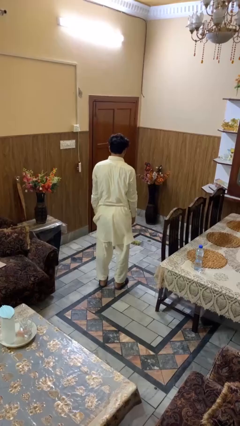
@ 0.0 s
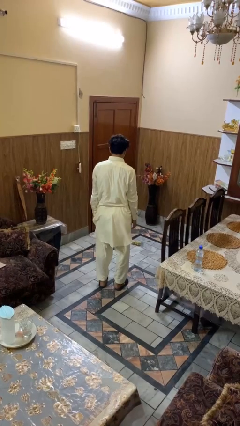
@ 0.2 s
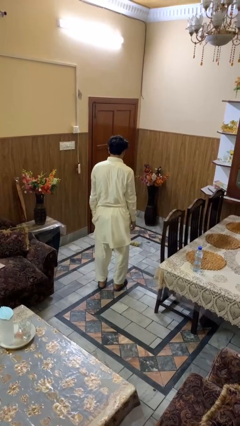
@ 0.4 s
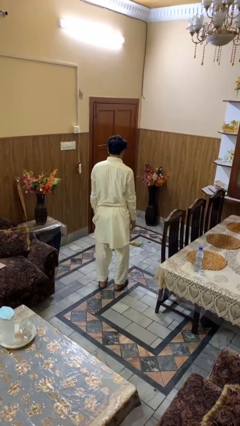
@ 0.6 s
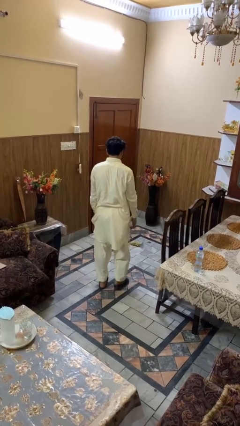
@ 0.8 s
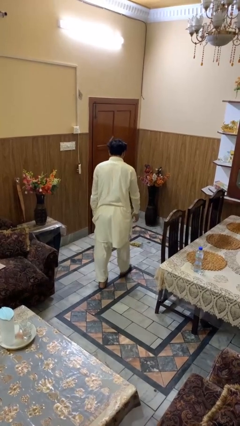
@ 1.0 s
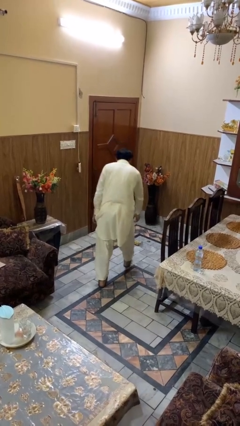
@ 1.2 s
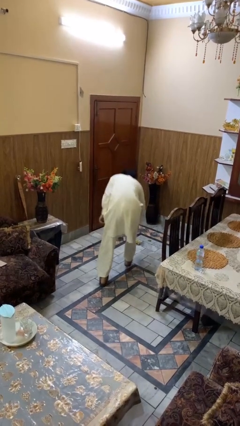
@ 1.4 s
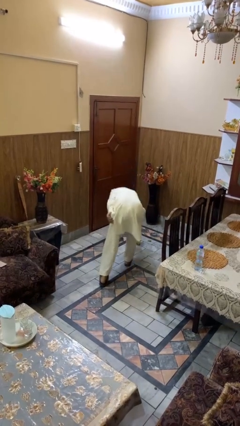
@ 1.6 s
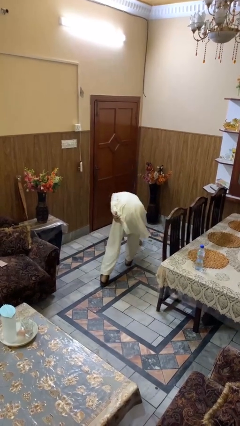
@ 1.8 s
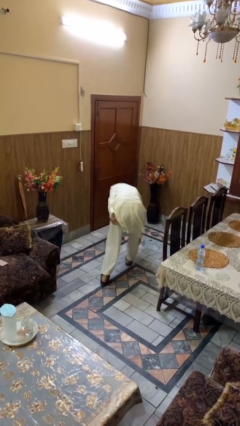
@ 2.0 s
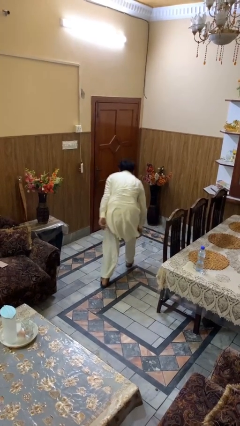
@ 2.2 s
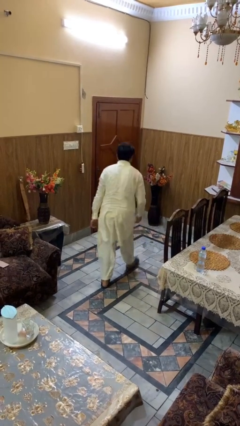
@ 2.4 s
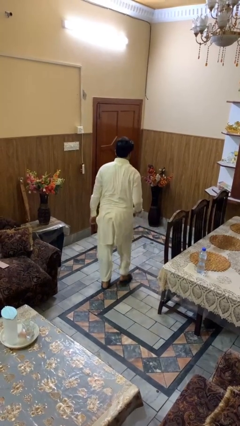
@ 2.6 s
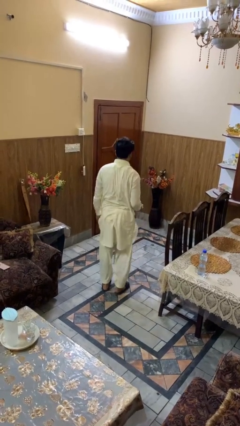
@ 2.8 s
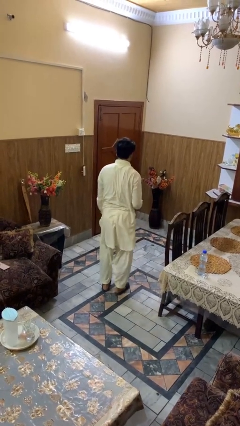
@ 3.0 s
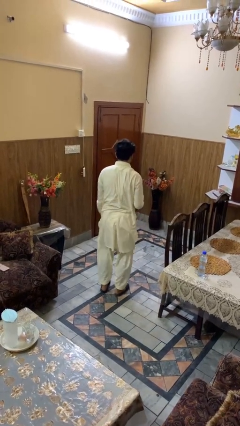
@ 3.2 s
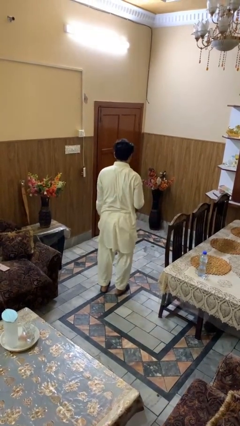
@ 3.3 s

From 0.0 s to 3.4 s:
person picks up object from floor

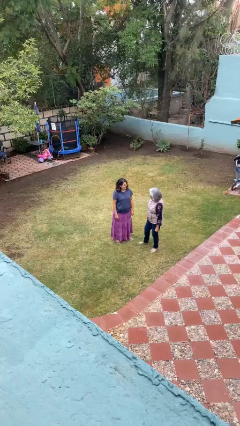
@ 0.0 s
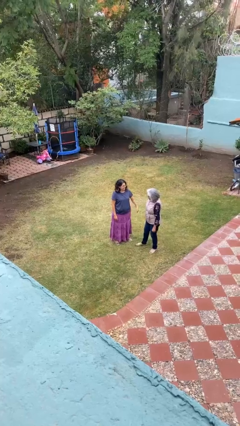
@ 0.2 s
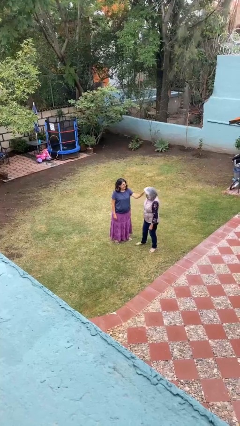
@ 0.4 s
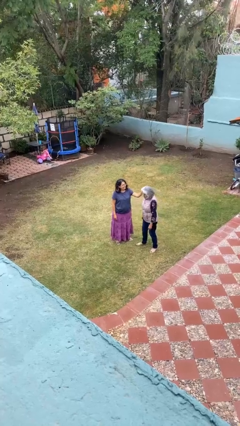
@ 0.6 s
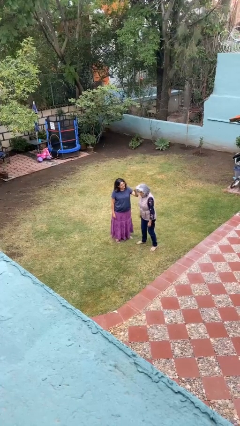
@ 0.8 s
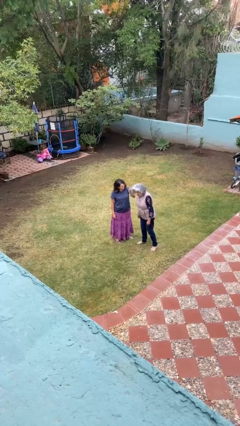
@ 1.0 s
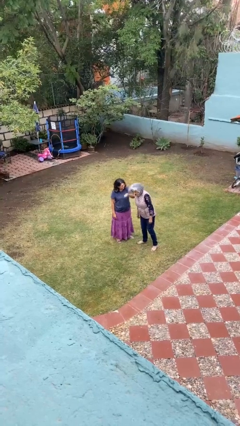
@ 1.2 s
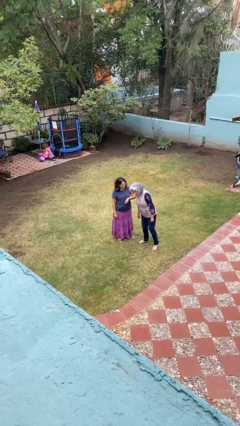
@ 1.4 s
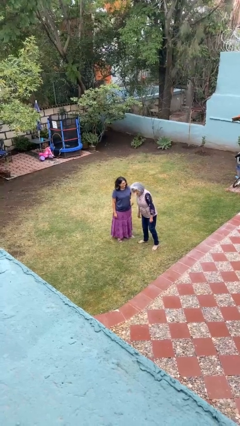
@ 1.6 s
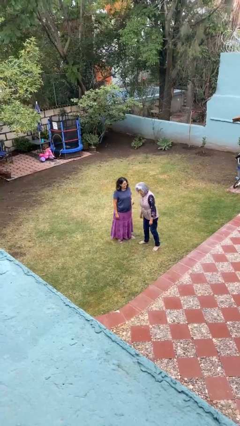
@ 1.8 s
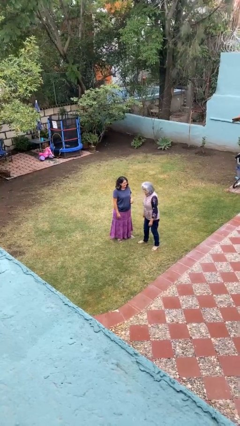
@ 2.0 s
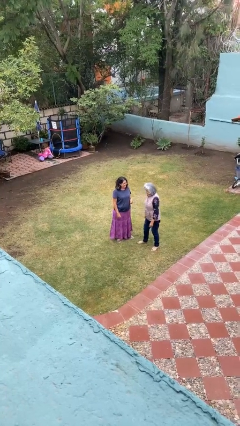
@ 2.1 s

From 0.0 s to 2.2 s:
person grabs person by hair

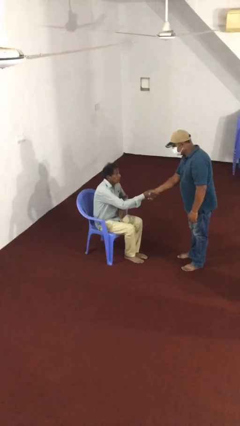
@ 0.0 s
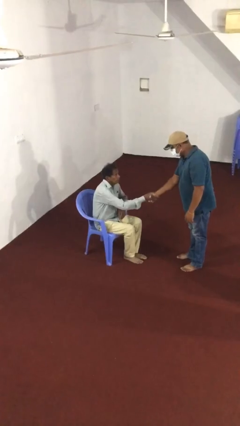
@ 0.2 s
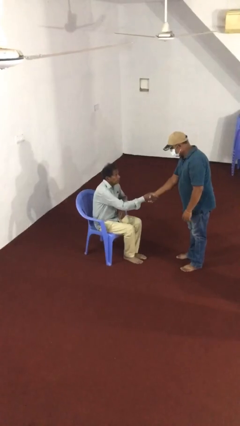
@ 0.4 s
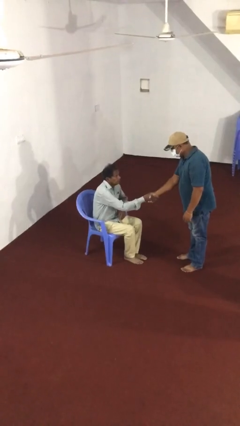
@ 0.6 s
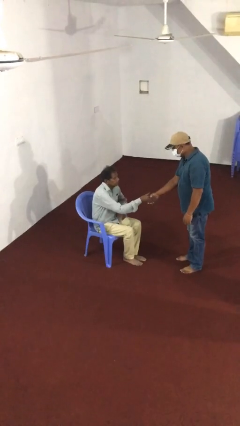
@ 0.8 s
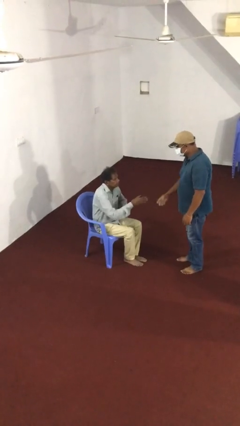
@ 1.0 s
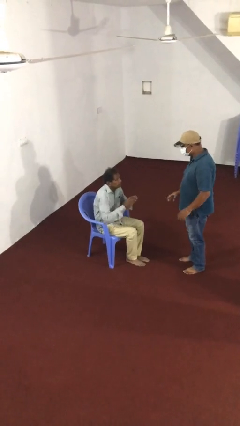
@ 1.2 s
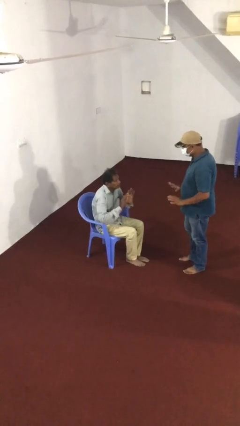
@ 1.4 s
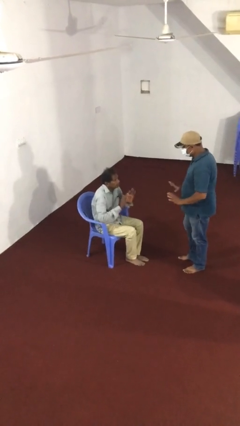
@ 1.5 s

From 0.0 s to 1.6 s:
person shakes hand

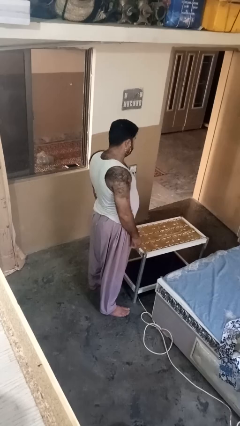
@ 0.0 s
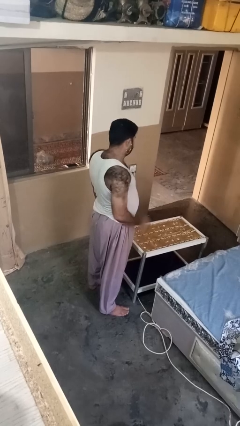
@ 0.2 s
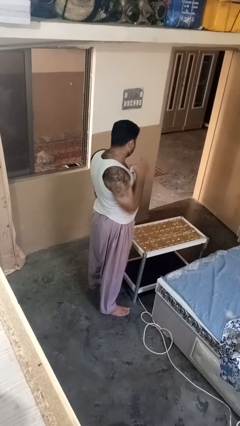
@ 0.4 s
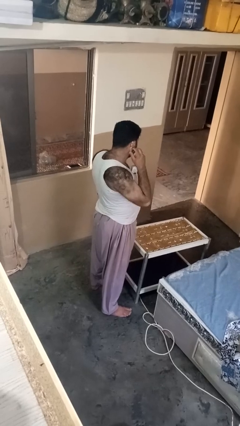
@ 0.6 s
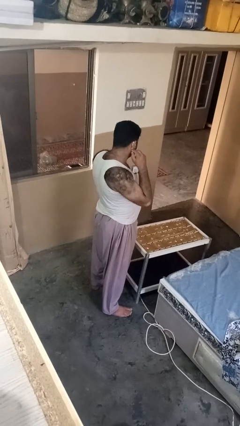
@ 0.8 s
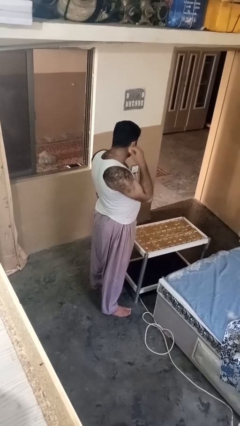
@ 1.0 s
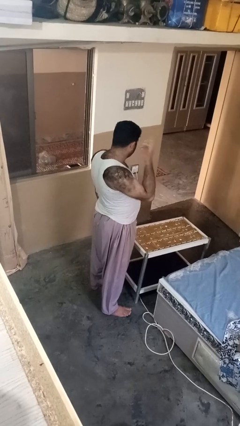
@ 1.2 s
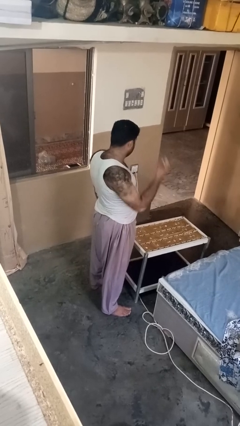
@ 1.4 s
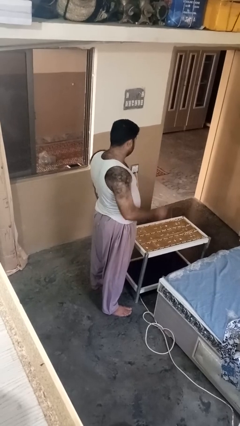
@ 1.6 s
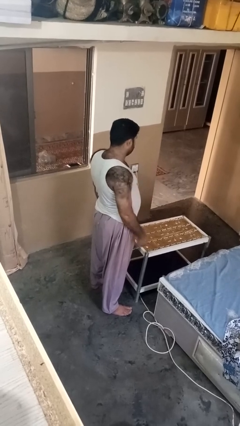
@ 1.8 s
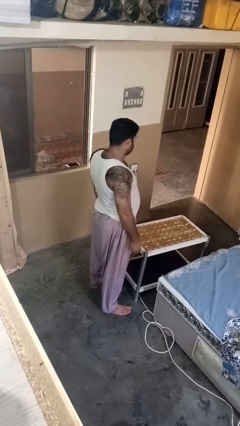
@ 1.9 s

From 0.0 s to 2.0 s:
person takes off earrings

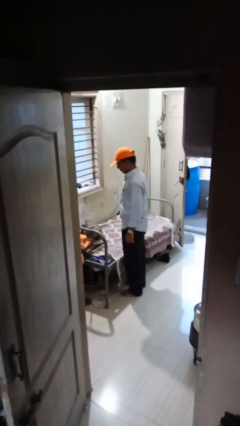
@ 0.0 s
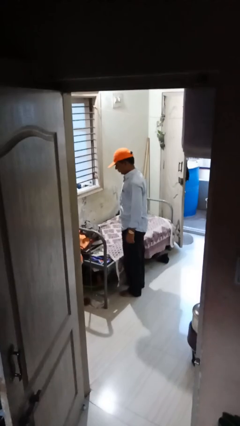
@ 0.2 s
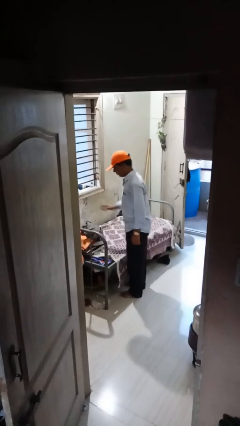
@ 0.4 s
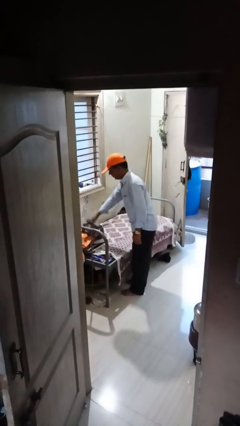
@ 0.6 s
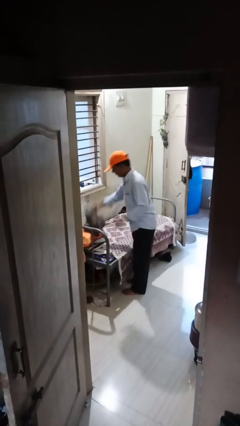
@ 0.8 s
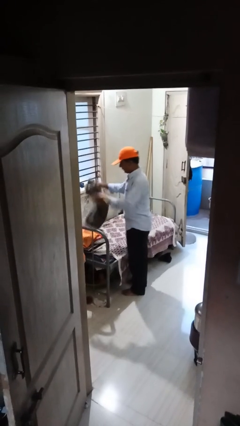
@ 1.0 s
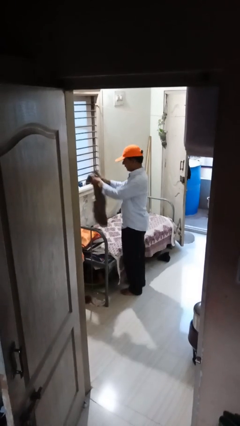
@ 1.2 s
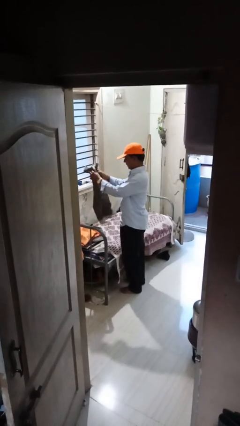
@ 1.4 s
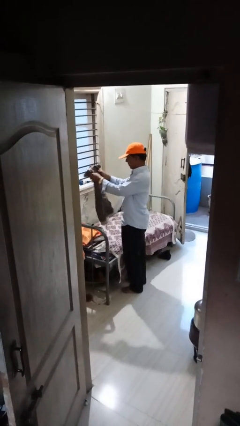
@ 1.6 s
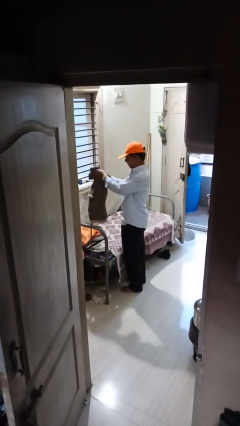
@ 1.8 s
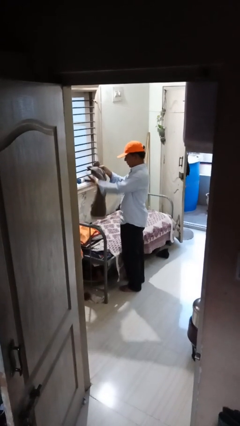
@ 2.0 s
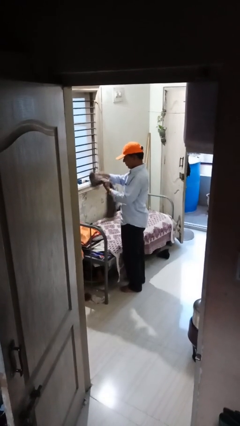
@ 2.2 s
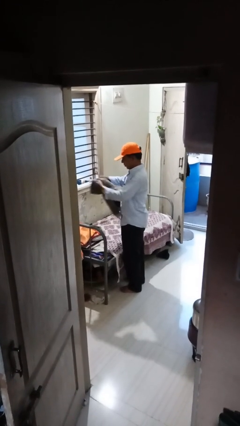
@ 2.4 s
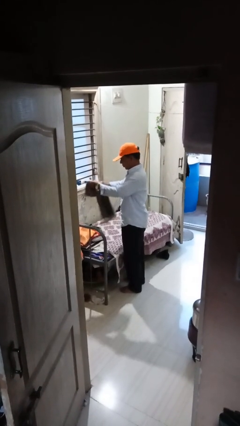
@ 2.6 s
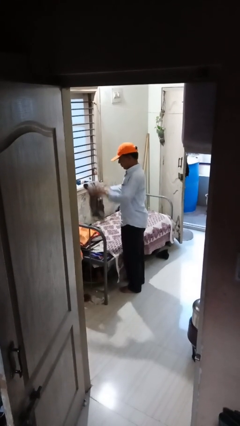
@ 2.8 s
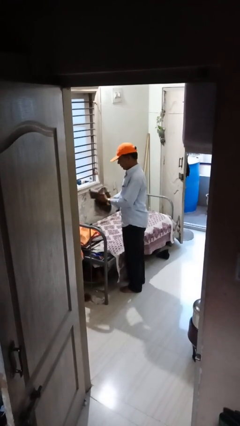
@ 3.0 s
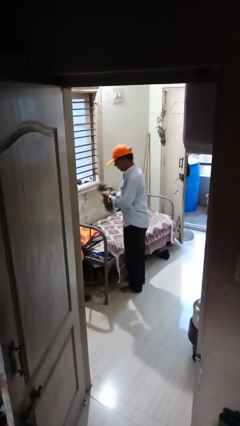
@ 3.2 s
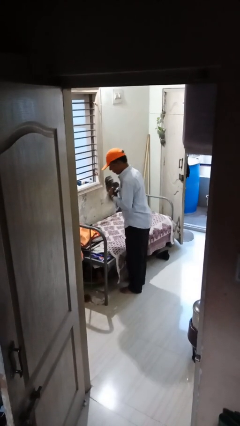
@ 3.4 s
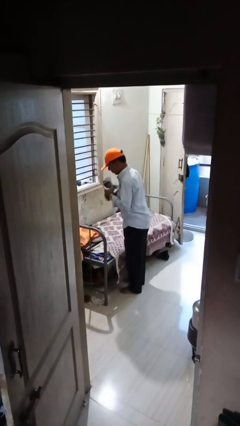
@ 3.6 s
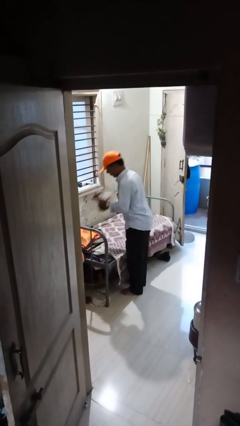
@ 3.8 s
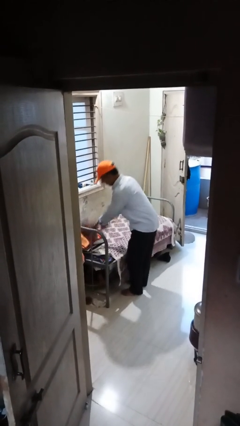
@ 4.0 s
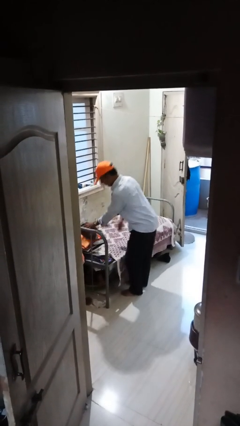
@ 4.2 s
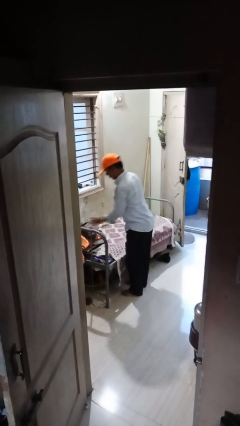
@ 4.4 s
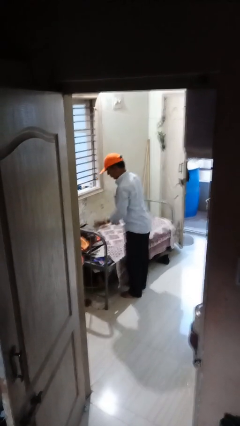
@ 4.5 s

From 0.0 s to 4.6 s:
person folds pants

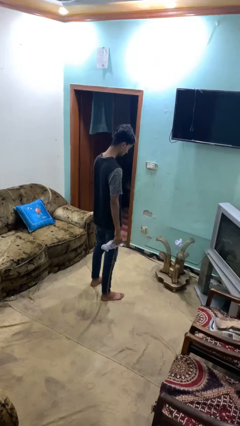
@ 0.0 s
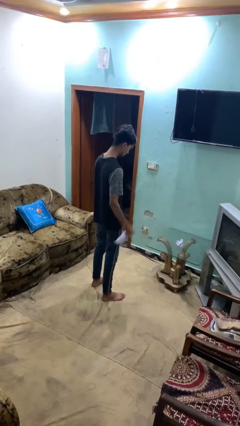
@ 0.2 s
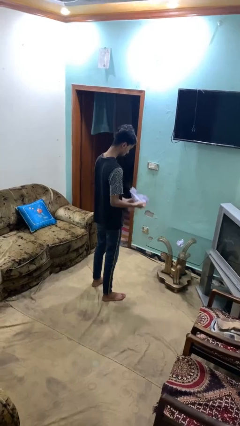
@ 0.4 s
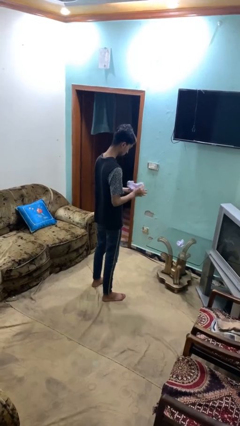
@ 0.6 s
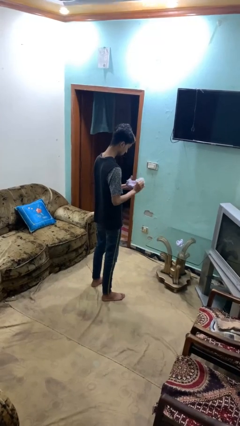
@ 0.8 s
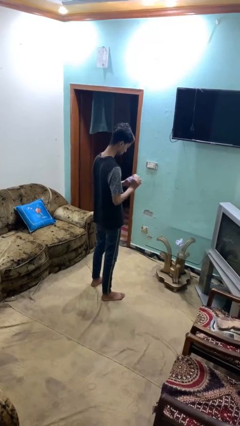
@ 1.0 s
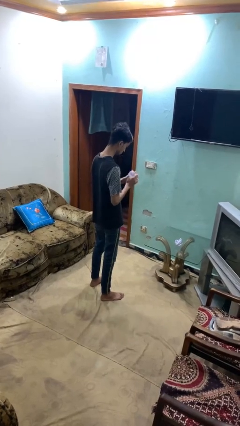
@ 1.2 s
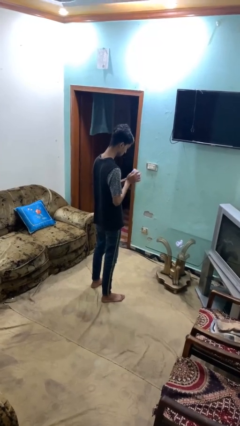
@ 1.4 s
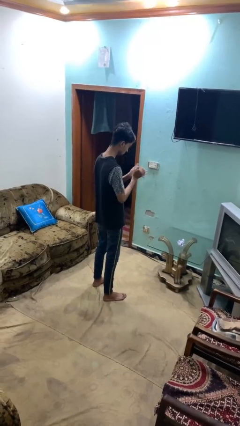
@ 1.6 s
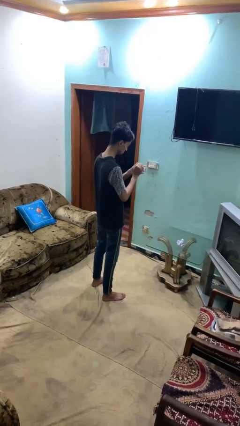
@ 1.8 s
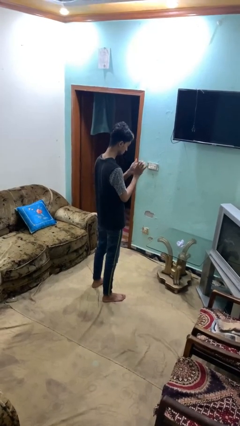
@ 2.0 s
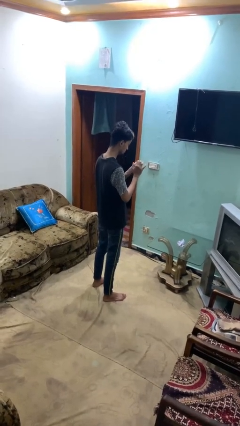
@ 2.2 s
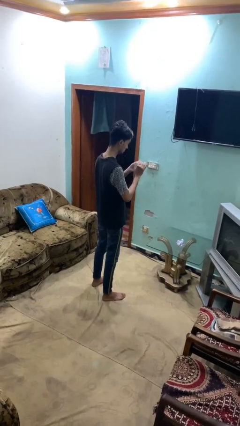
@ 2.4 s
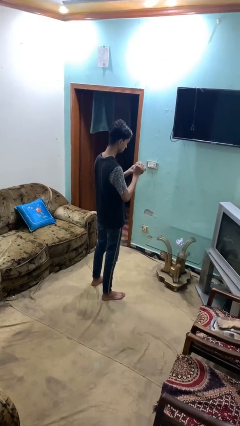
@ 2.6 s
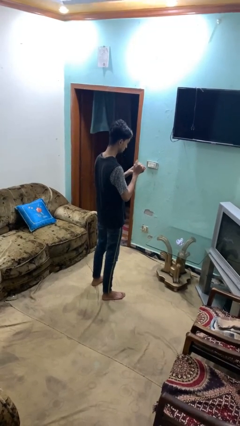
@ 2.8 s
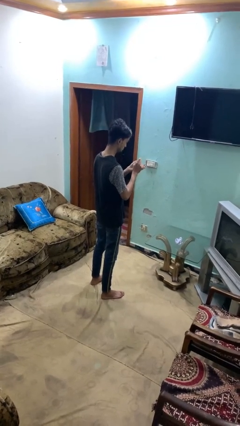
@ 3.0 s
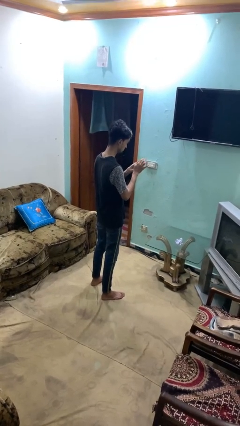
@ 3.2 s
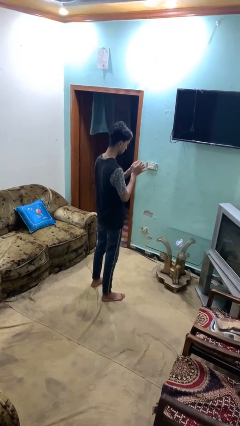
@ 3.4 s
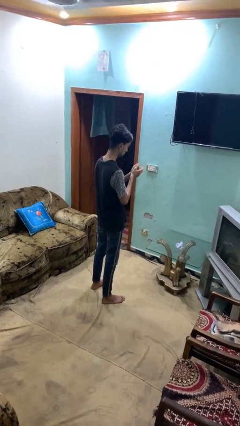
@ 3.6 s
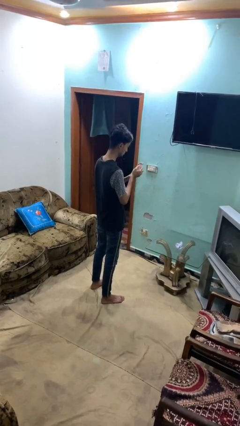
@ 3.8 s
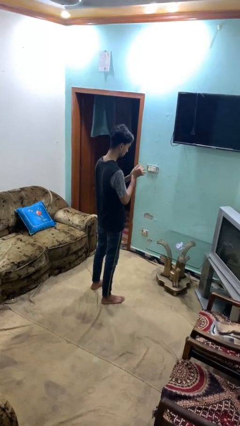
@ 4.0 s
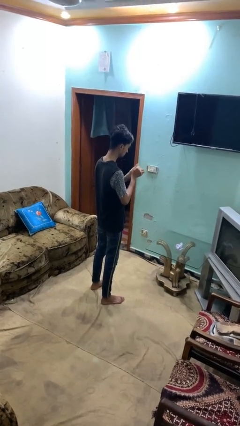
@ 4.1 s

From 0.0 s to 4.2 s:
person crumples paper
